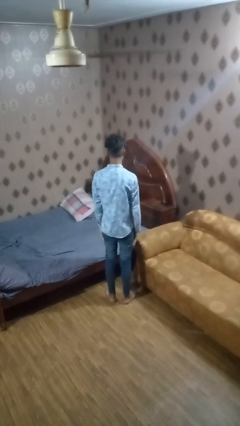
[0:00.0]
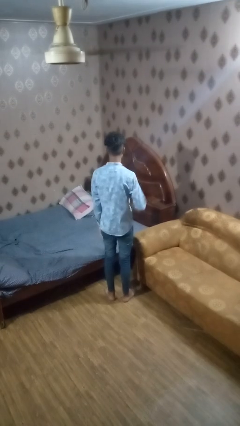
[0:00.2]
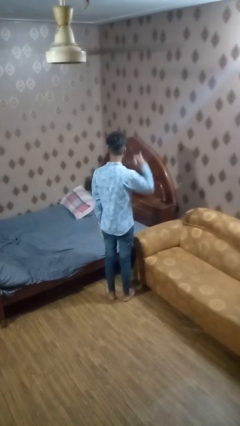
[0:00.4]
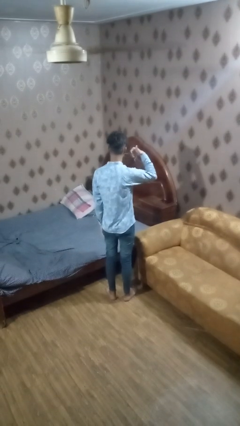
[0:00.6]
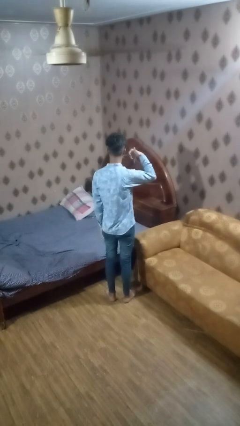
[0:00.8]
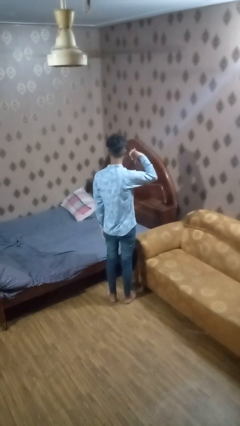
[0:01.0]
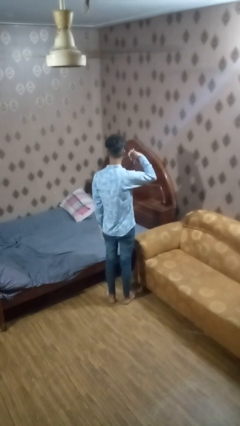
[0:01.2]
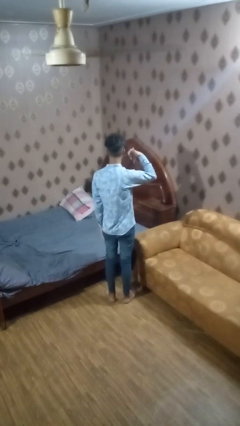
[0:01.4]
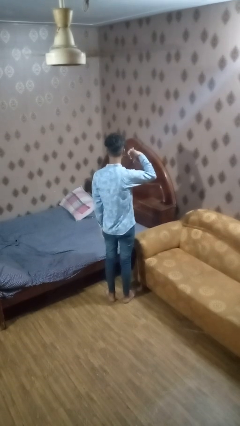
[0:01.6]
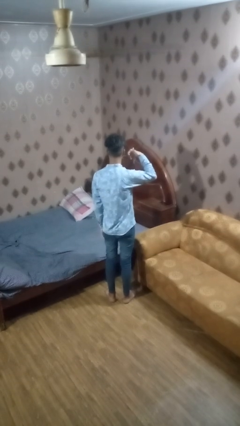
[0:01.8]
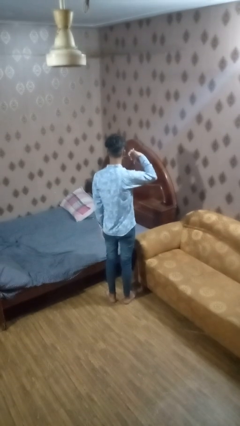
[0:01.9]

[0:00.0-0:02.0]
person gestures call me

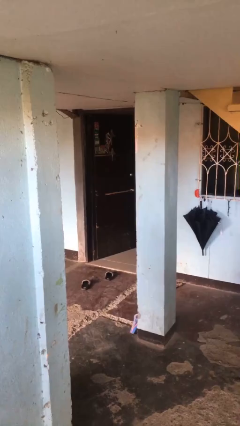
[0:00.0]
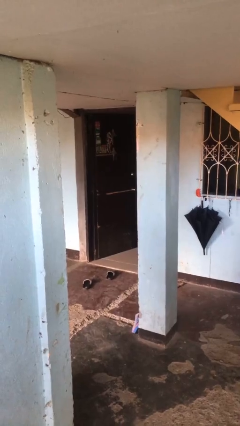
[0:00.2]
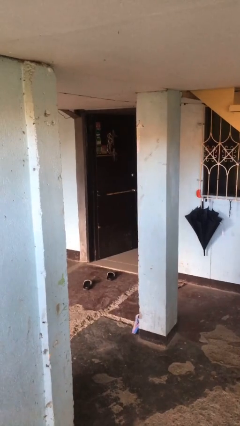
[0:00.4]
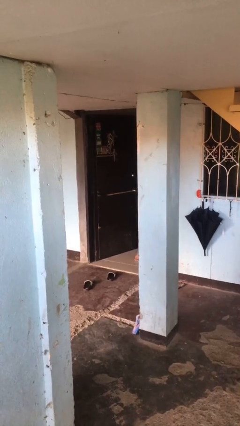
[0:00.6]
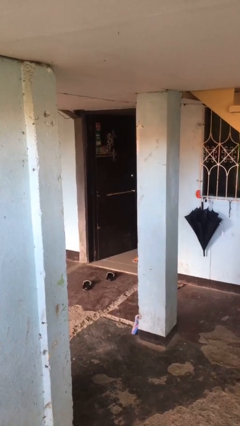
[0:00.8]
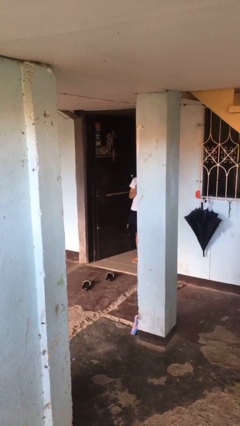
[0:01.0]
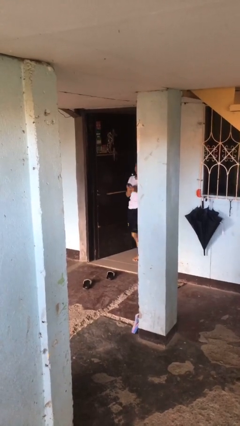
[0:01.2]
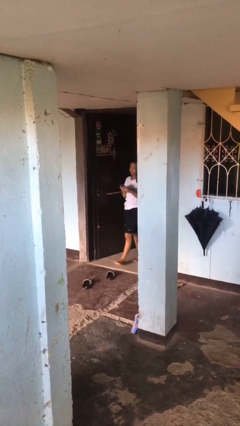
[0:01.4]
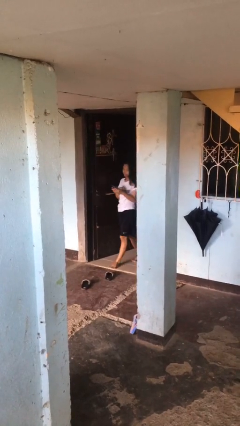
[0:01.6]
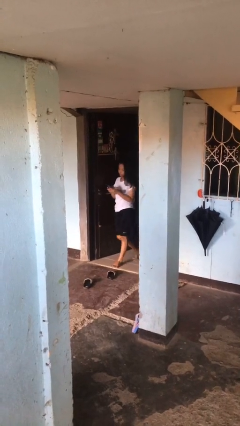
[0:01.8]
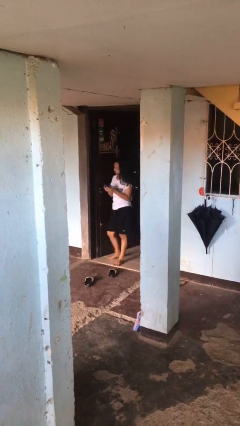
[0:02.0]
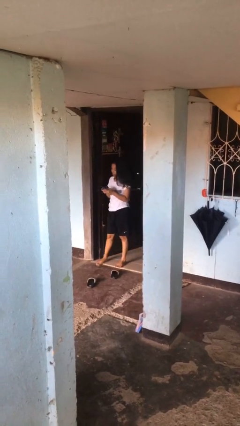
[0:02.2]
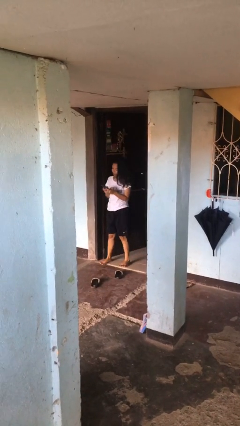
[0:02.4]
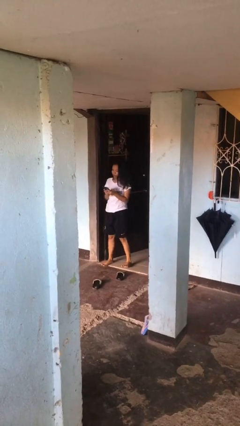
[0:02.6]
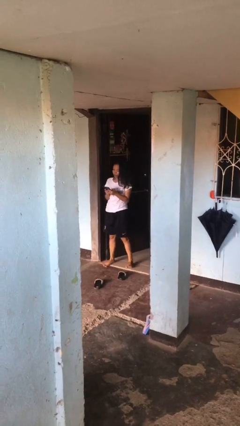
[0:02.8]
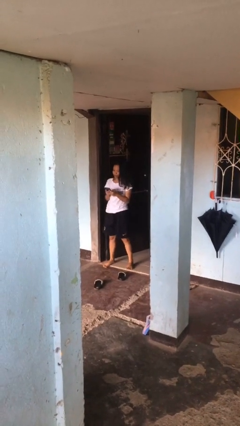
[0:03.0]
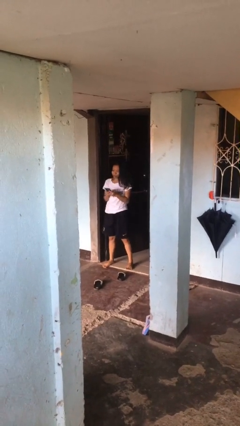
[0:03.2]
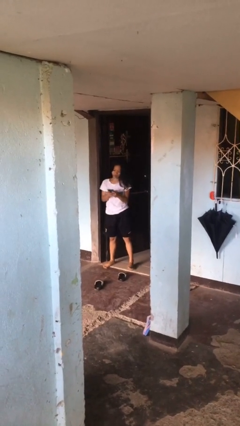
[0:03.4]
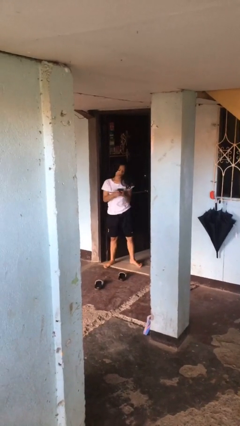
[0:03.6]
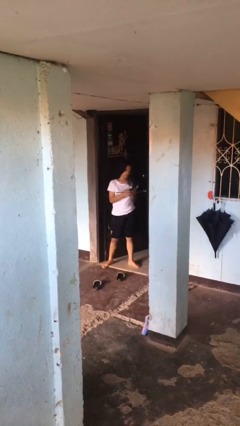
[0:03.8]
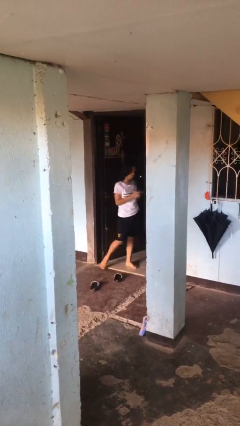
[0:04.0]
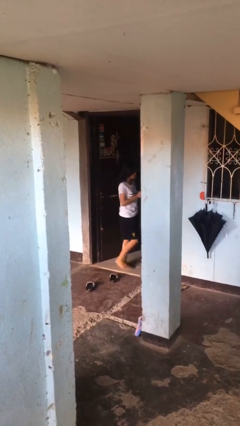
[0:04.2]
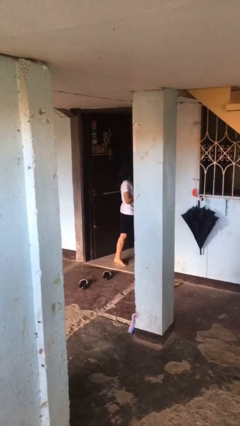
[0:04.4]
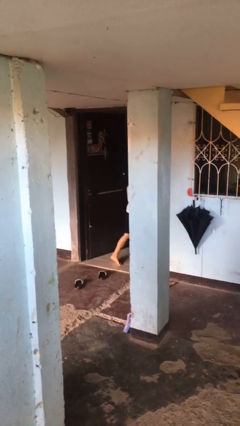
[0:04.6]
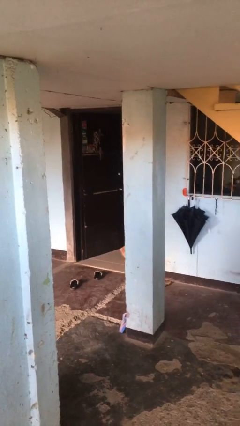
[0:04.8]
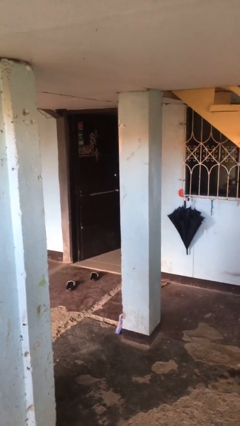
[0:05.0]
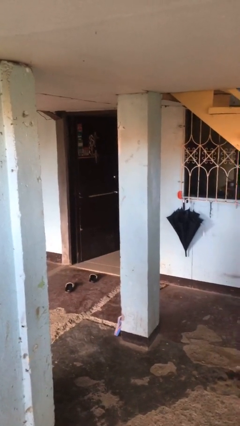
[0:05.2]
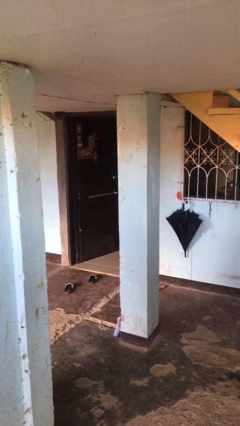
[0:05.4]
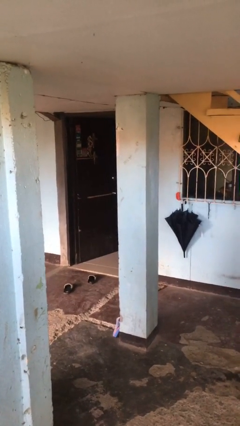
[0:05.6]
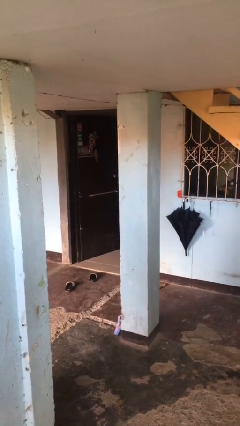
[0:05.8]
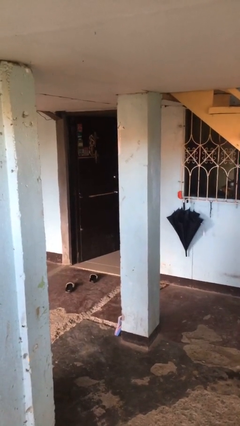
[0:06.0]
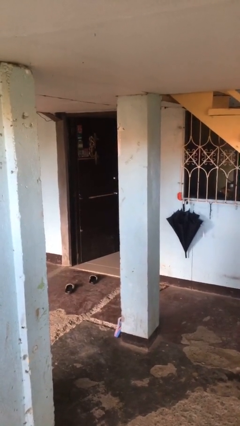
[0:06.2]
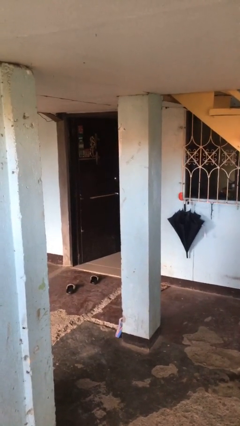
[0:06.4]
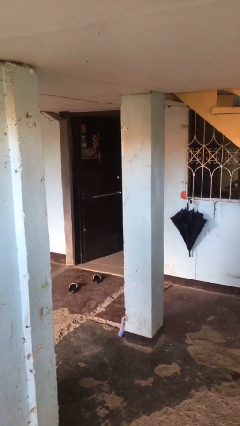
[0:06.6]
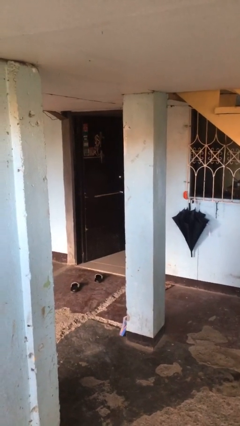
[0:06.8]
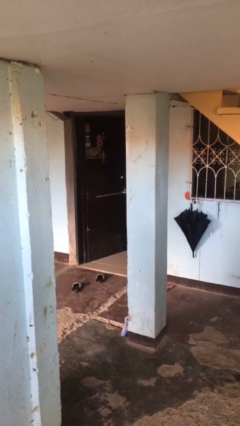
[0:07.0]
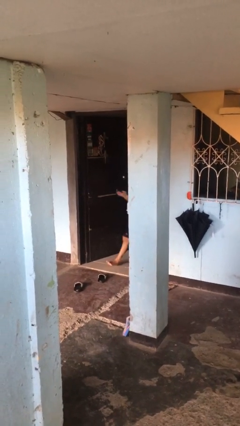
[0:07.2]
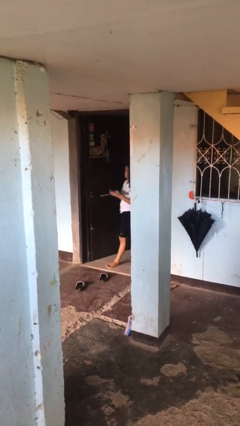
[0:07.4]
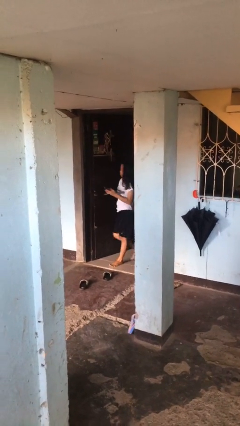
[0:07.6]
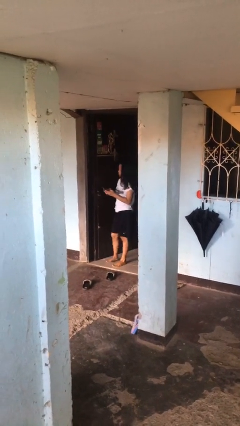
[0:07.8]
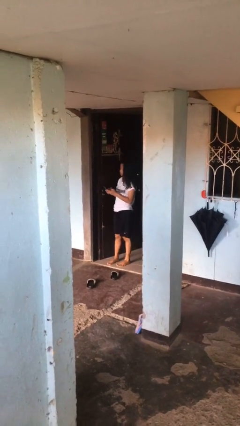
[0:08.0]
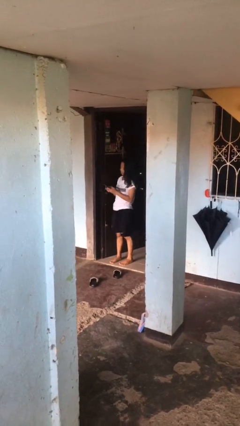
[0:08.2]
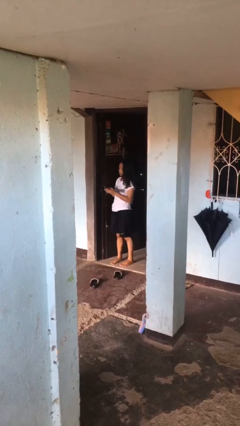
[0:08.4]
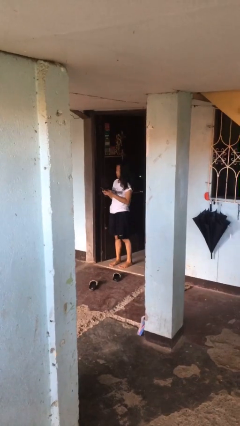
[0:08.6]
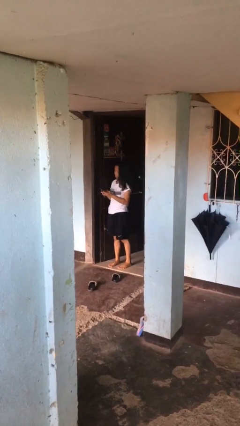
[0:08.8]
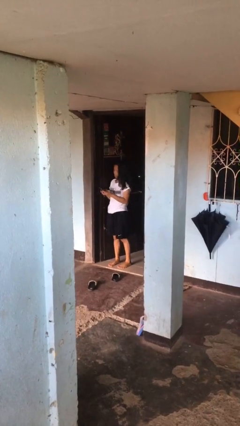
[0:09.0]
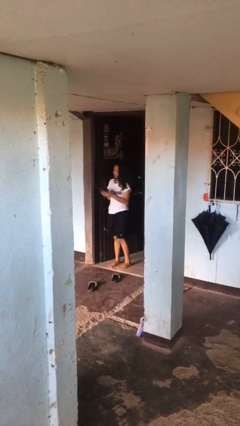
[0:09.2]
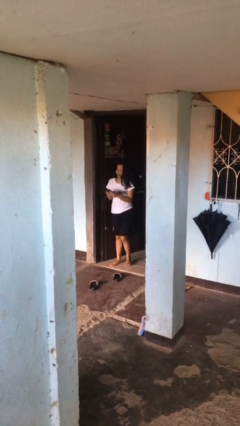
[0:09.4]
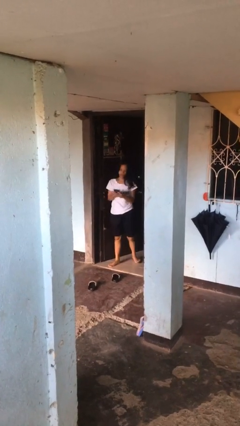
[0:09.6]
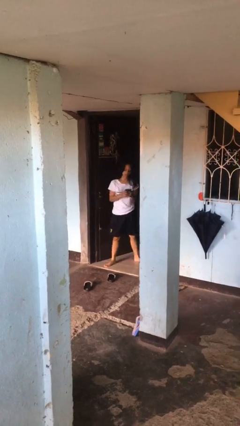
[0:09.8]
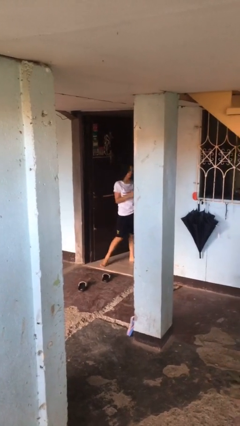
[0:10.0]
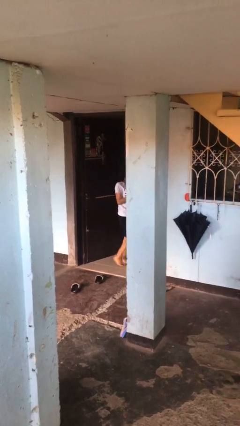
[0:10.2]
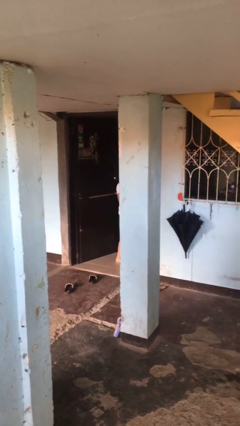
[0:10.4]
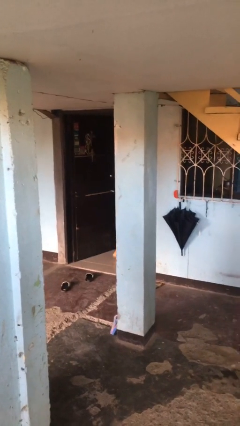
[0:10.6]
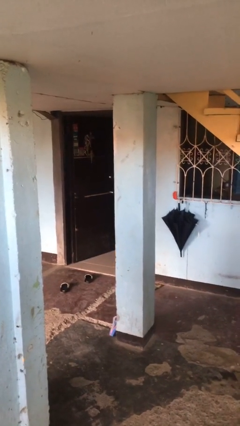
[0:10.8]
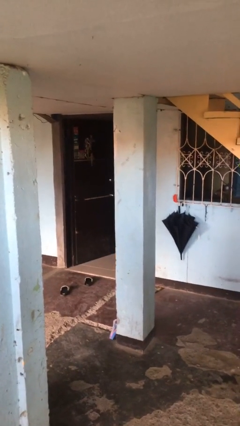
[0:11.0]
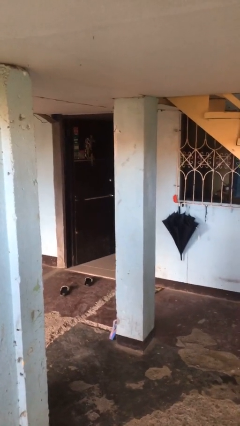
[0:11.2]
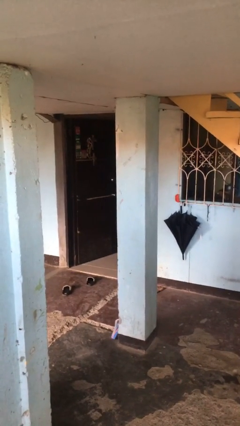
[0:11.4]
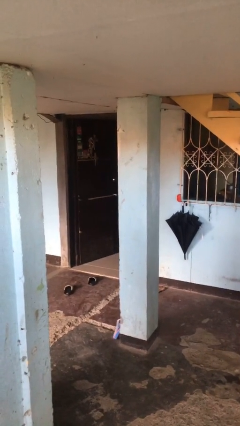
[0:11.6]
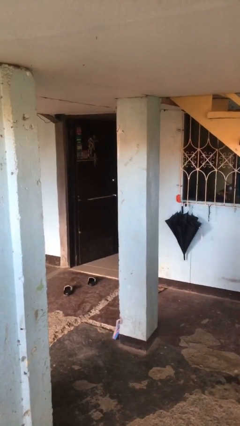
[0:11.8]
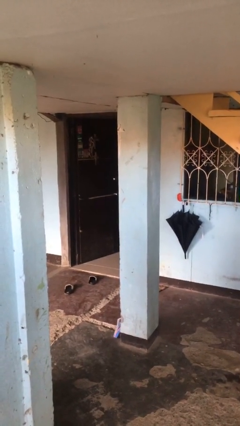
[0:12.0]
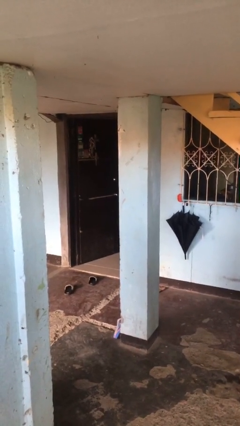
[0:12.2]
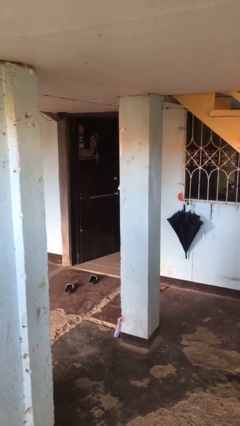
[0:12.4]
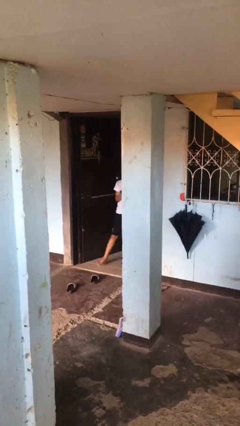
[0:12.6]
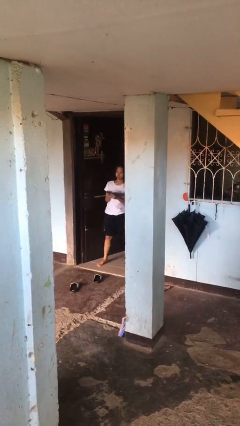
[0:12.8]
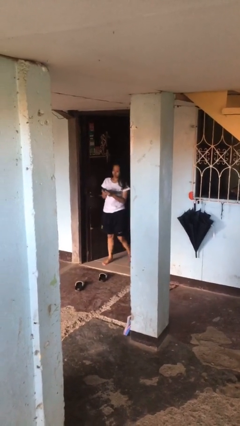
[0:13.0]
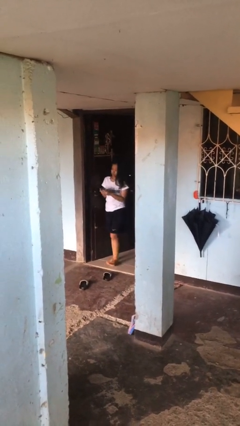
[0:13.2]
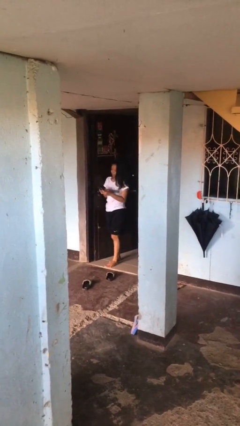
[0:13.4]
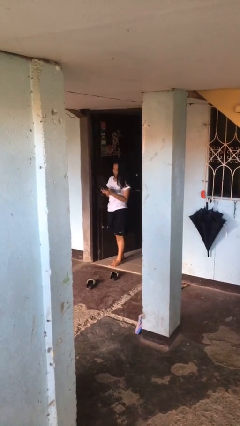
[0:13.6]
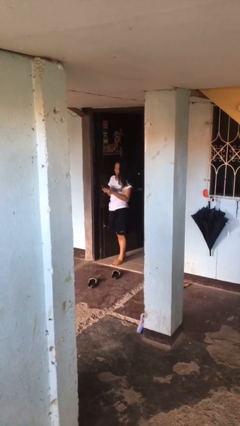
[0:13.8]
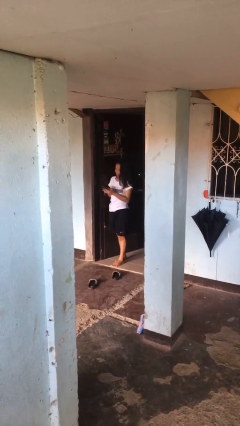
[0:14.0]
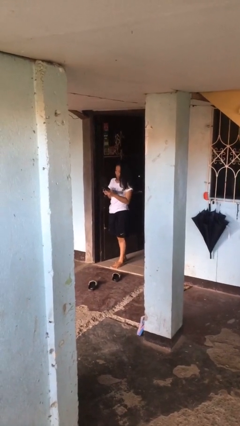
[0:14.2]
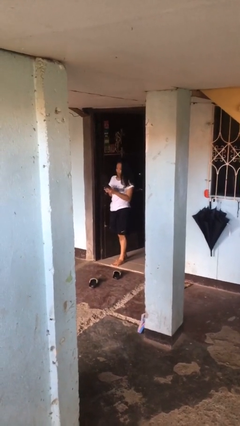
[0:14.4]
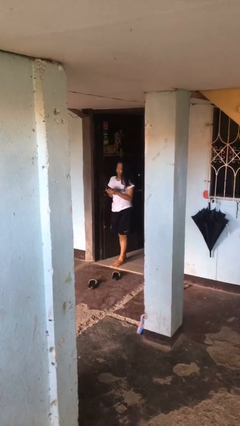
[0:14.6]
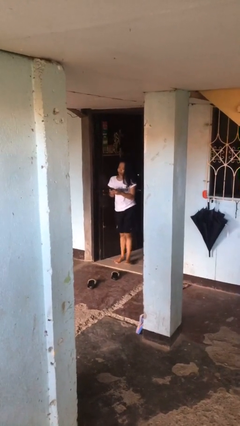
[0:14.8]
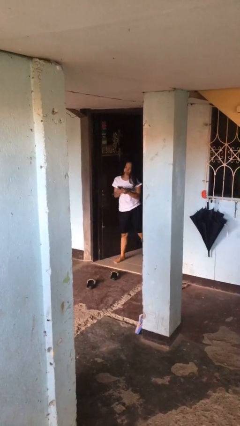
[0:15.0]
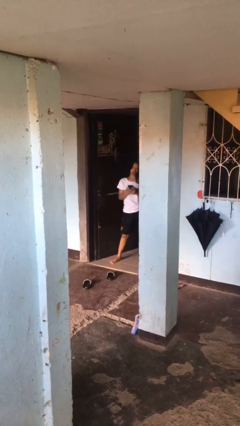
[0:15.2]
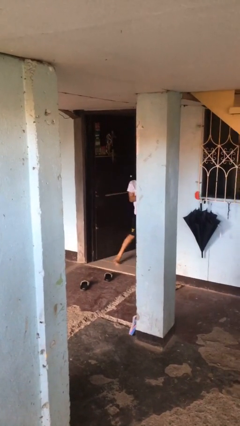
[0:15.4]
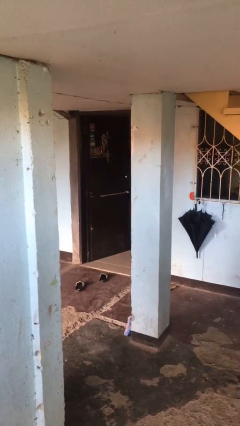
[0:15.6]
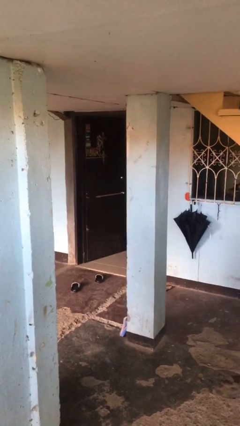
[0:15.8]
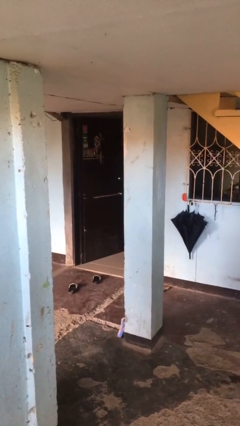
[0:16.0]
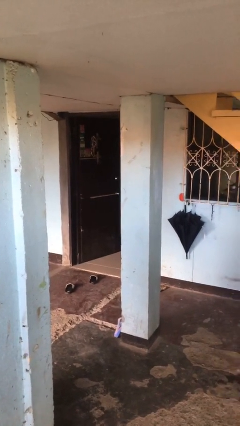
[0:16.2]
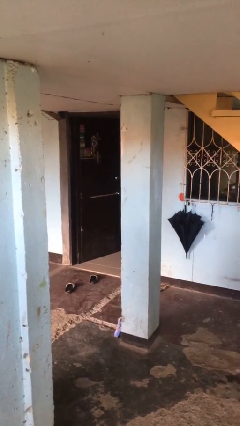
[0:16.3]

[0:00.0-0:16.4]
person texts on phone
